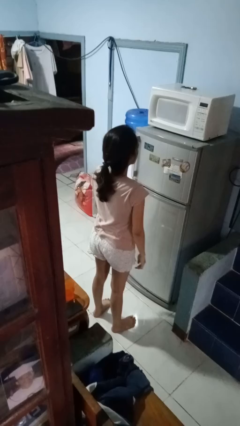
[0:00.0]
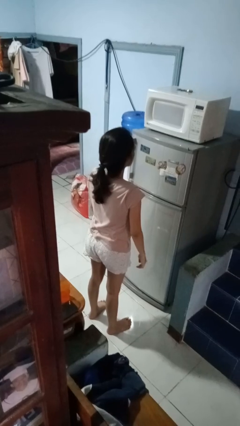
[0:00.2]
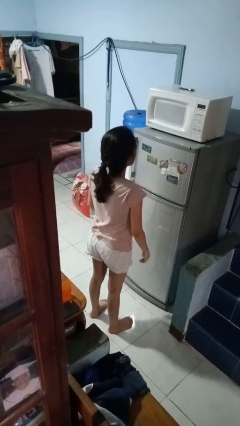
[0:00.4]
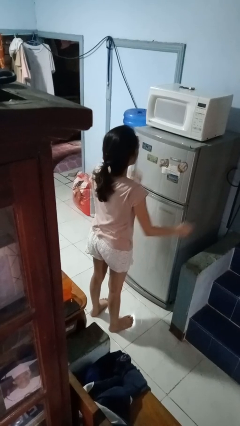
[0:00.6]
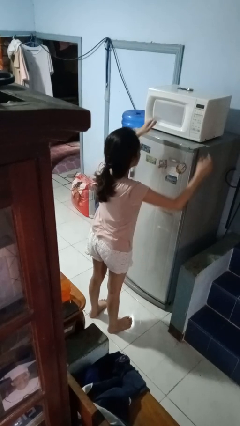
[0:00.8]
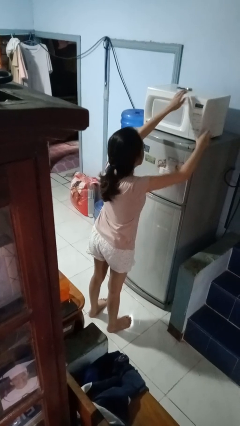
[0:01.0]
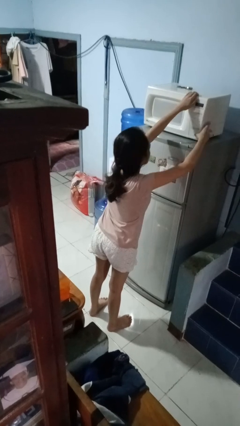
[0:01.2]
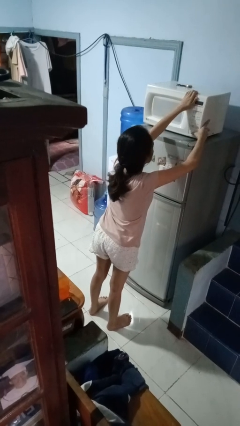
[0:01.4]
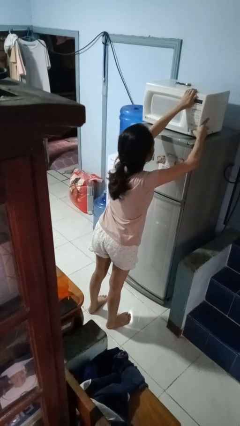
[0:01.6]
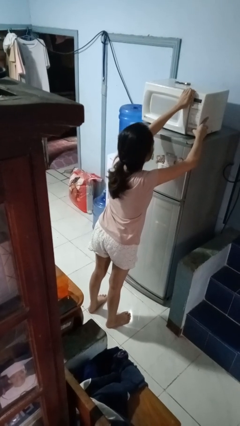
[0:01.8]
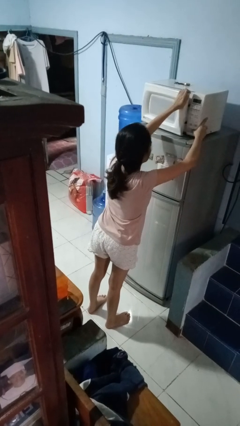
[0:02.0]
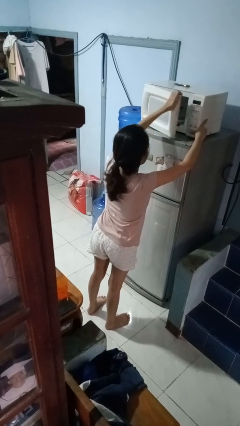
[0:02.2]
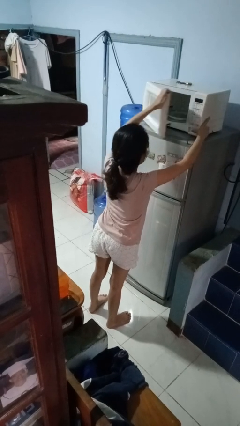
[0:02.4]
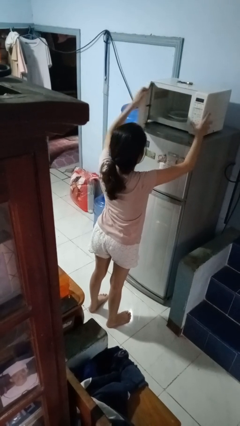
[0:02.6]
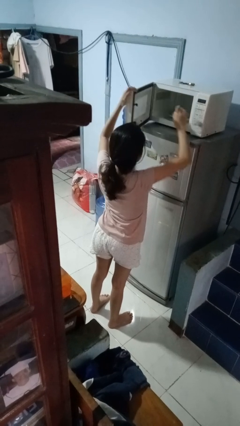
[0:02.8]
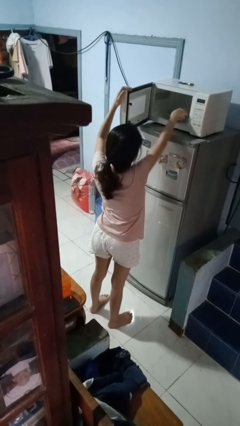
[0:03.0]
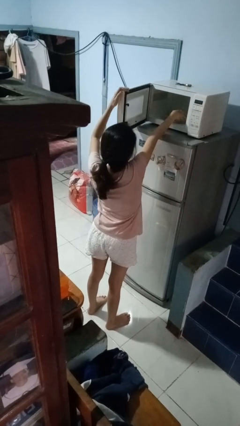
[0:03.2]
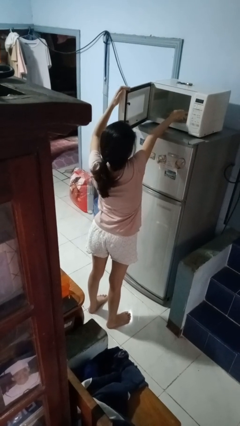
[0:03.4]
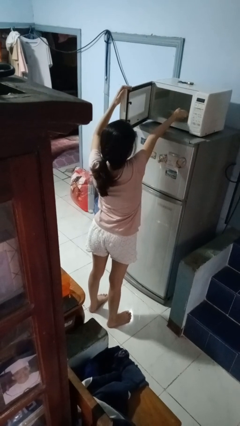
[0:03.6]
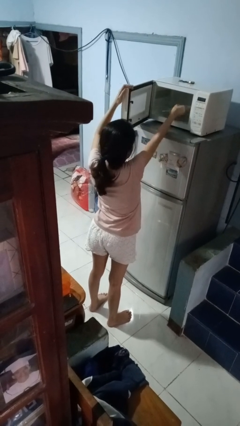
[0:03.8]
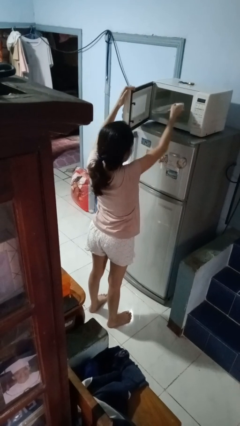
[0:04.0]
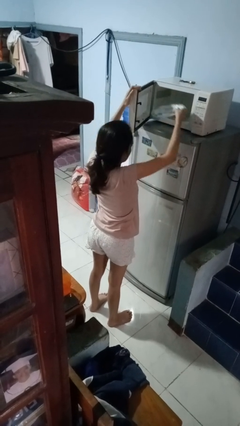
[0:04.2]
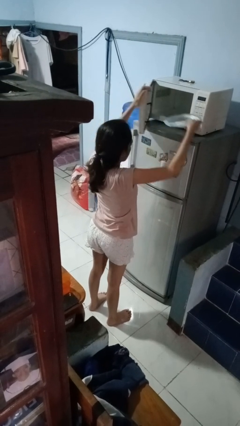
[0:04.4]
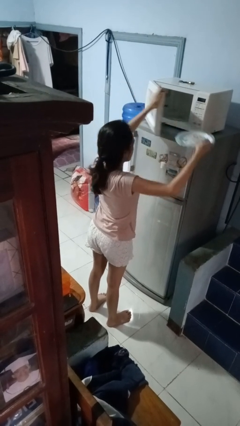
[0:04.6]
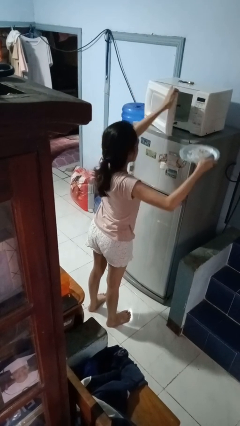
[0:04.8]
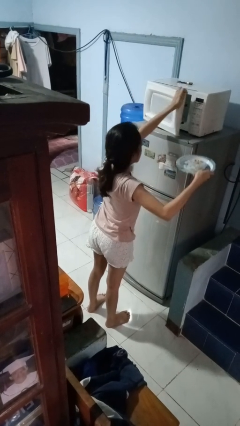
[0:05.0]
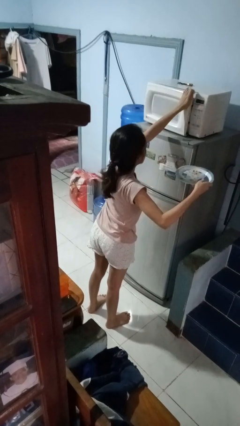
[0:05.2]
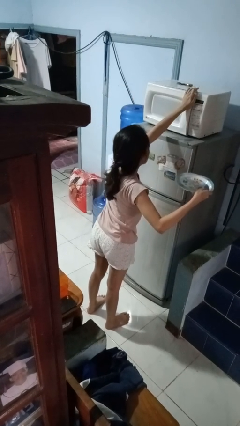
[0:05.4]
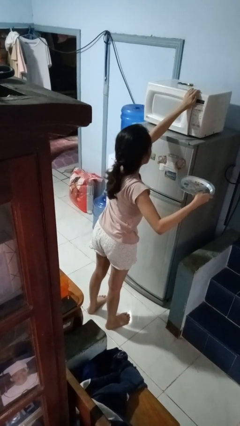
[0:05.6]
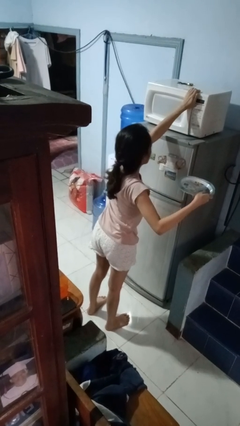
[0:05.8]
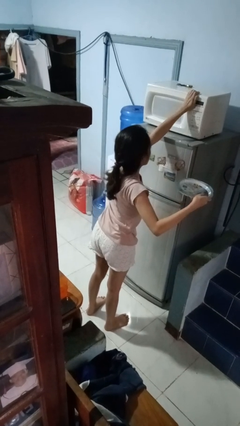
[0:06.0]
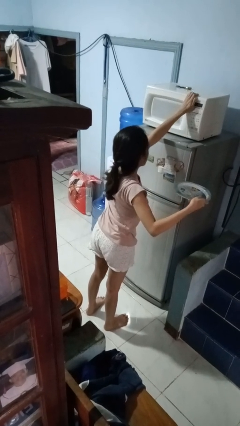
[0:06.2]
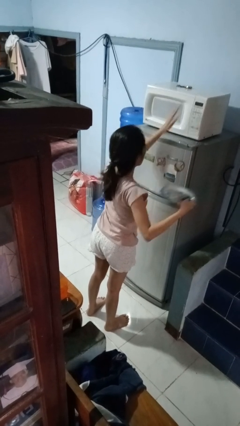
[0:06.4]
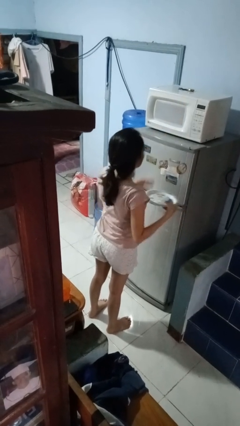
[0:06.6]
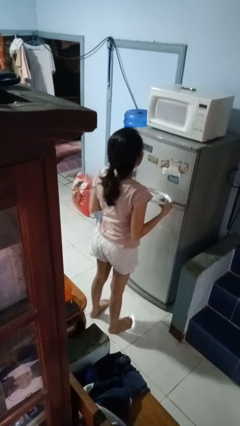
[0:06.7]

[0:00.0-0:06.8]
person takes object from microwave

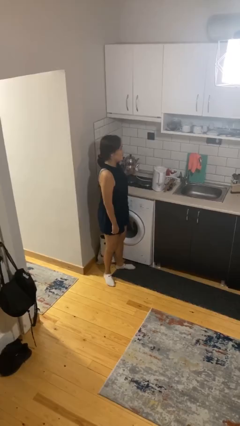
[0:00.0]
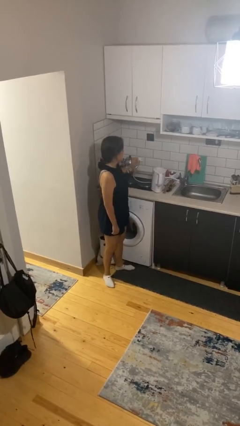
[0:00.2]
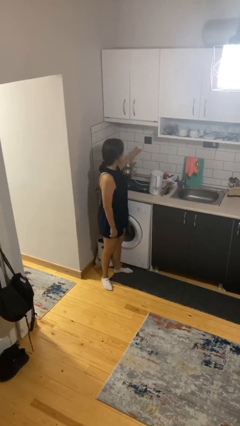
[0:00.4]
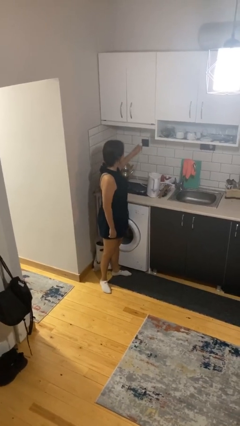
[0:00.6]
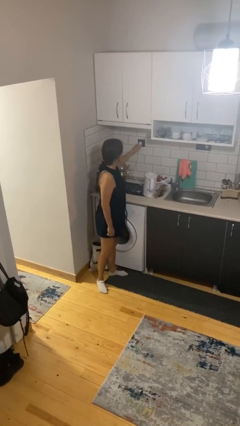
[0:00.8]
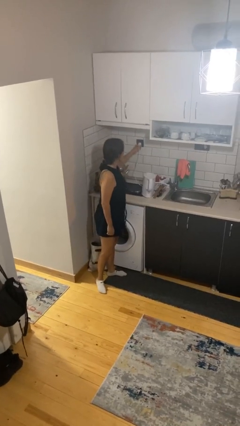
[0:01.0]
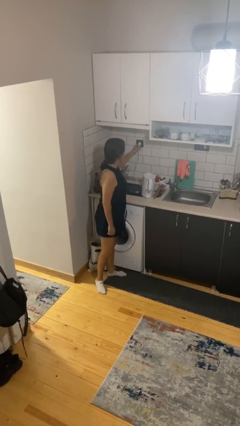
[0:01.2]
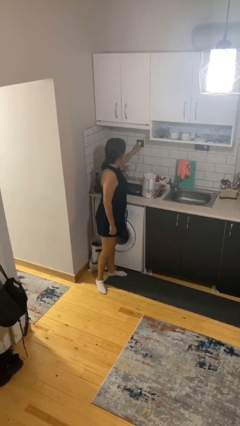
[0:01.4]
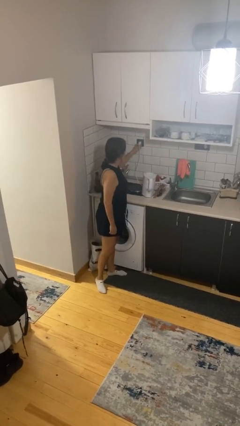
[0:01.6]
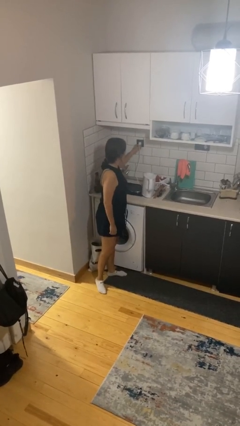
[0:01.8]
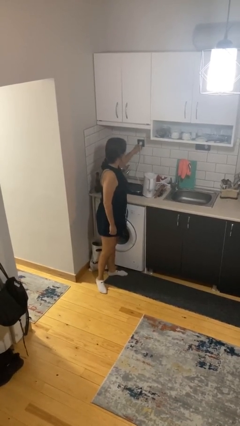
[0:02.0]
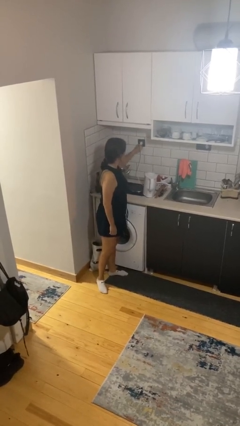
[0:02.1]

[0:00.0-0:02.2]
person plugs into electrical socket

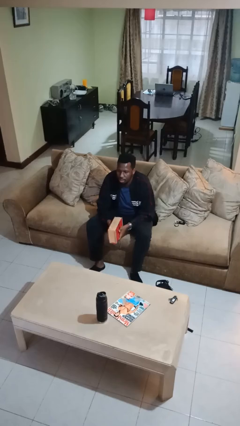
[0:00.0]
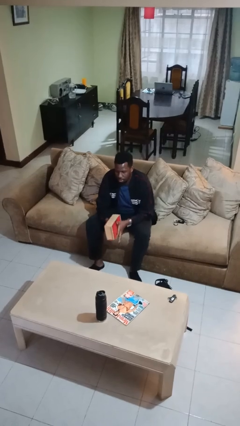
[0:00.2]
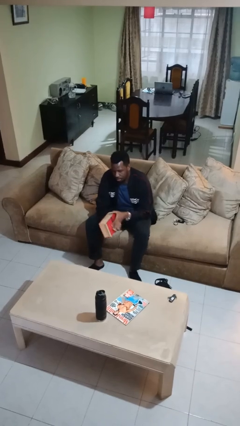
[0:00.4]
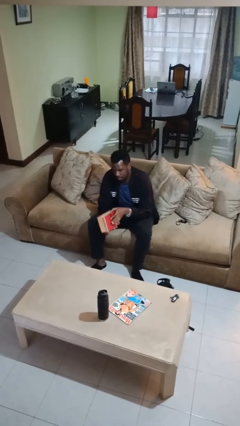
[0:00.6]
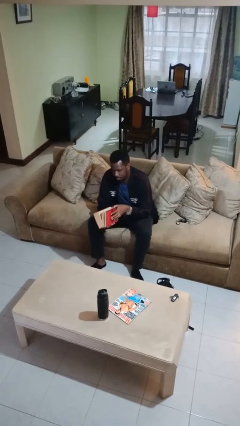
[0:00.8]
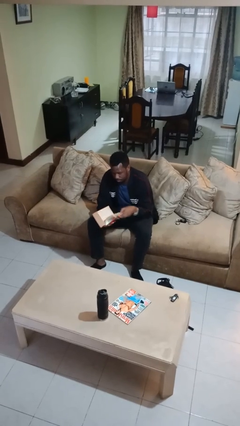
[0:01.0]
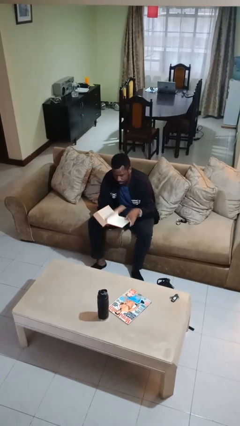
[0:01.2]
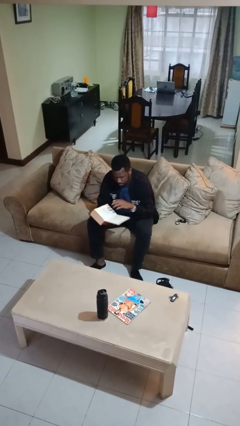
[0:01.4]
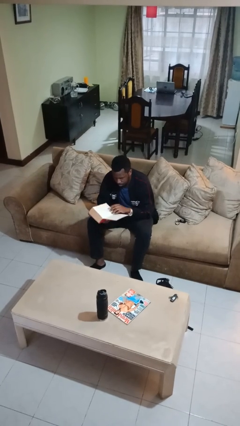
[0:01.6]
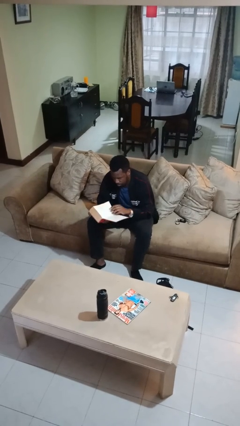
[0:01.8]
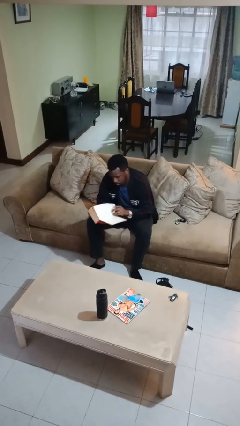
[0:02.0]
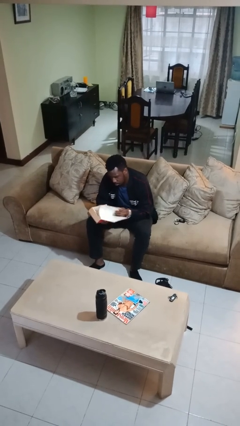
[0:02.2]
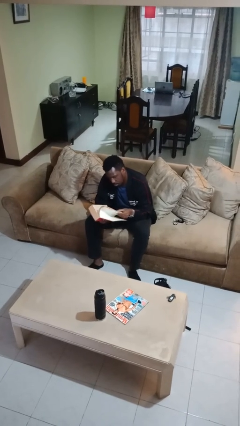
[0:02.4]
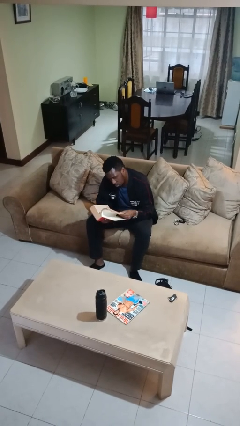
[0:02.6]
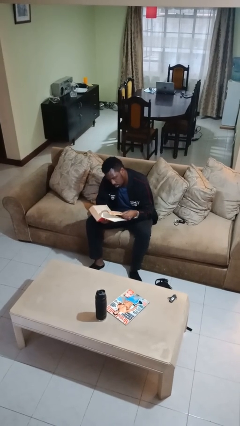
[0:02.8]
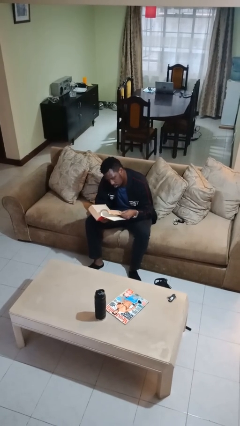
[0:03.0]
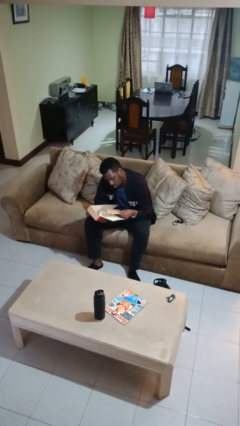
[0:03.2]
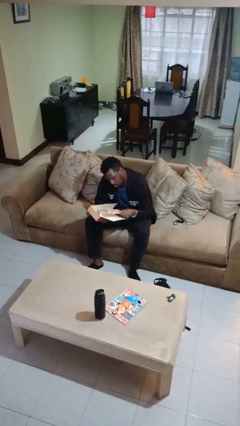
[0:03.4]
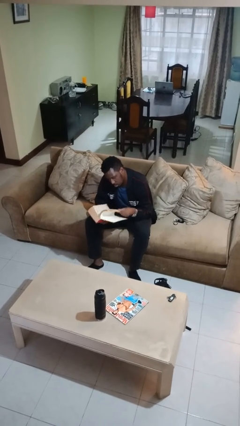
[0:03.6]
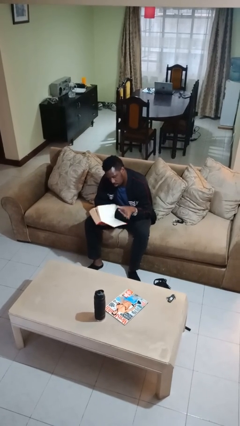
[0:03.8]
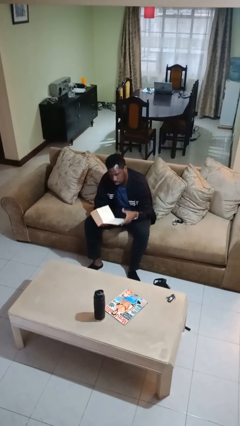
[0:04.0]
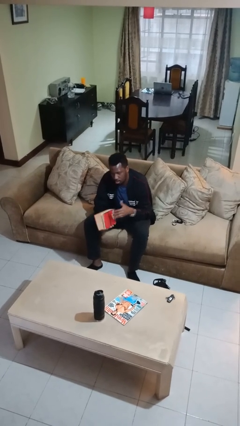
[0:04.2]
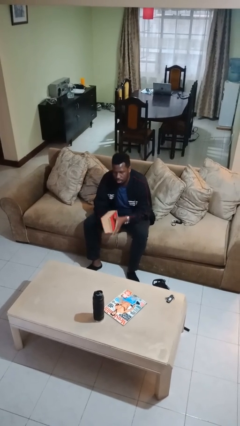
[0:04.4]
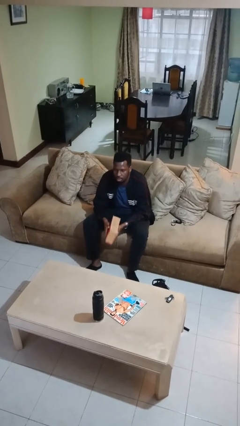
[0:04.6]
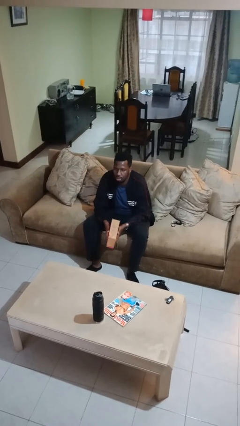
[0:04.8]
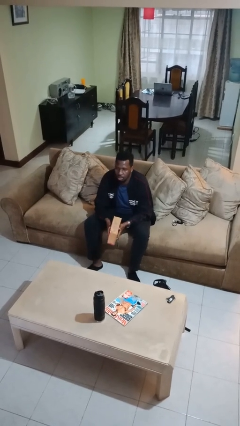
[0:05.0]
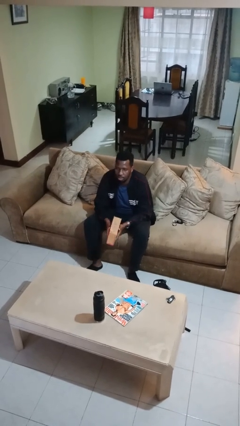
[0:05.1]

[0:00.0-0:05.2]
person reads book

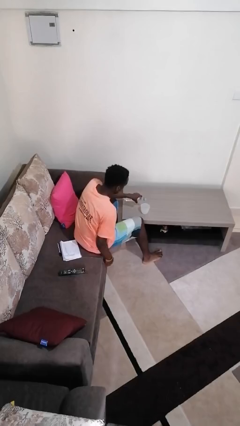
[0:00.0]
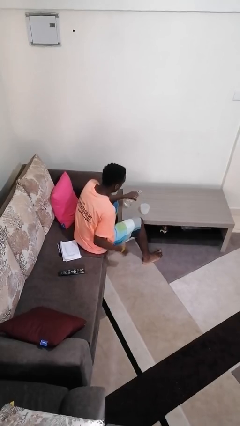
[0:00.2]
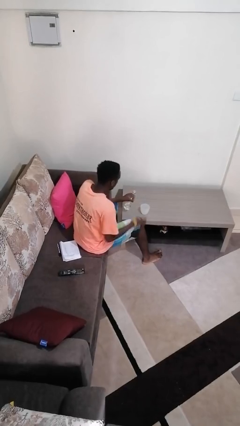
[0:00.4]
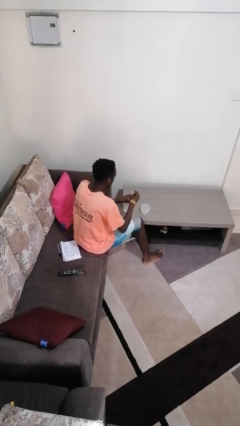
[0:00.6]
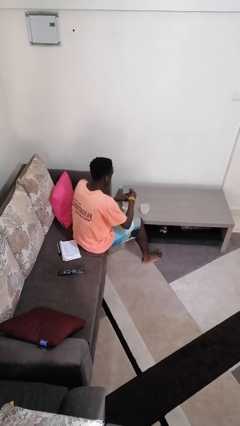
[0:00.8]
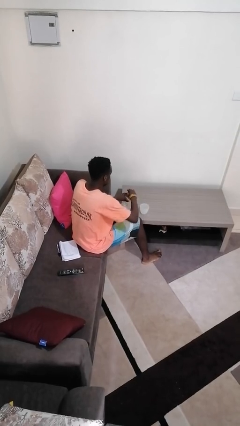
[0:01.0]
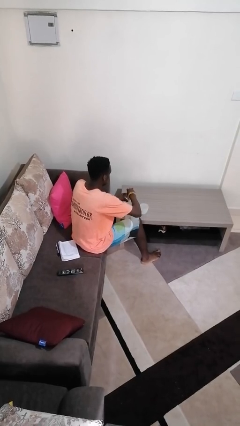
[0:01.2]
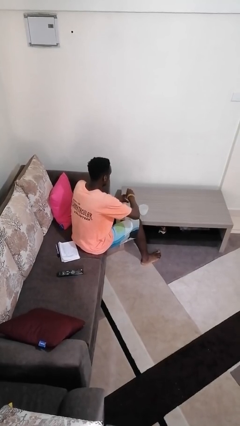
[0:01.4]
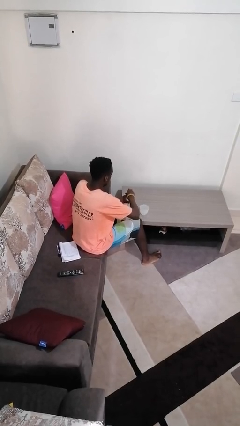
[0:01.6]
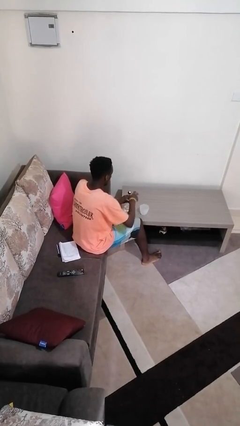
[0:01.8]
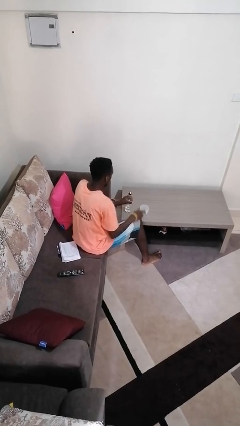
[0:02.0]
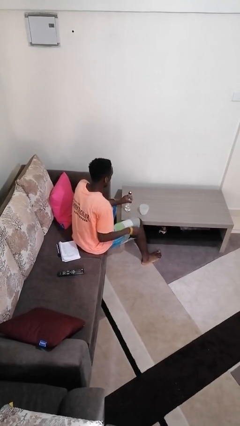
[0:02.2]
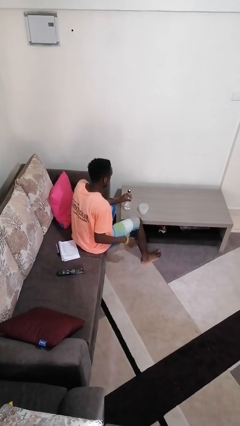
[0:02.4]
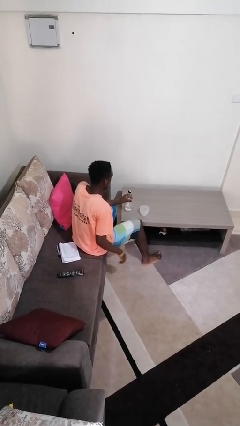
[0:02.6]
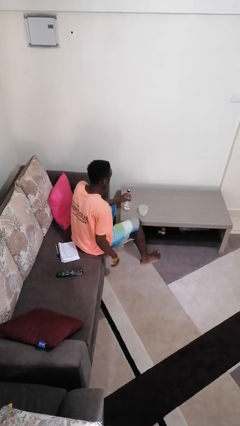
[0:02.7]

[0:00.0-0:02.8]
person screws lid to bottle

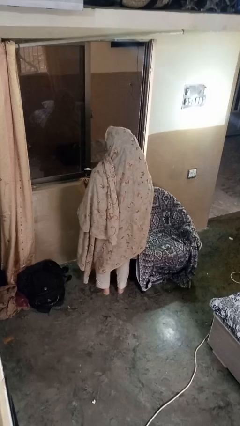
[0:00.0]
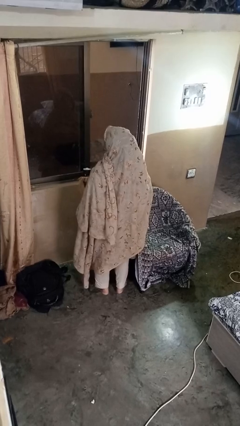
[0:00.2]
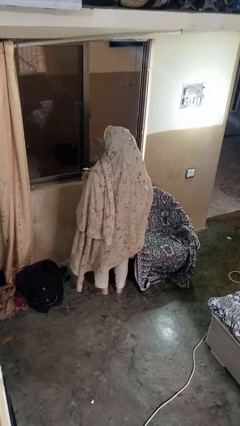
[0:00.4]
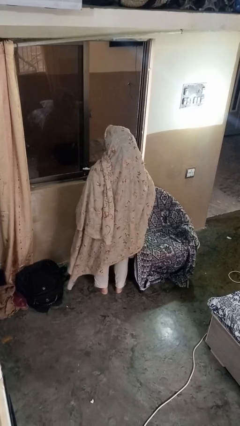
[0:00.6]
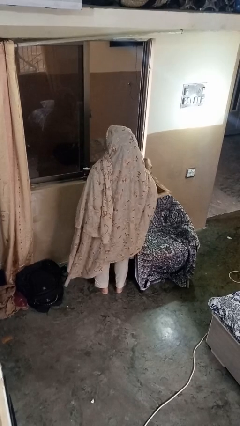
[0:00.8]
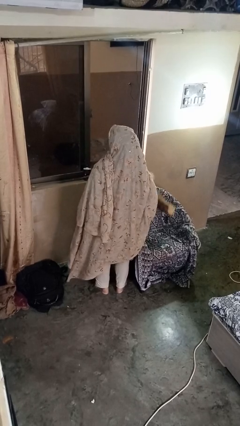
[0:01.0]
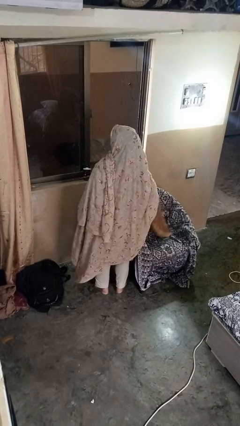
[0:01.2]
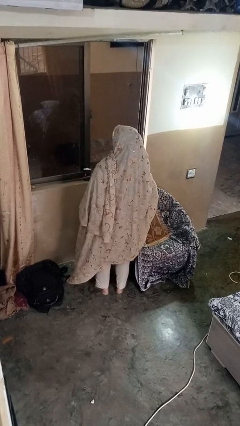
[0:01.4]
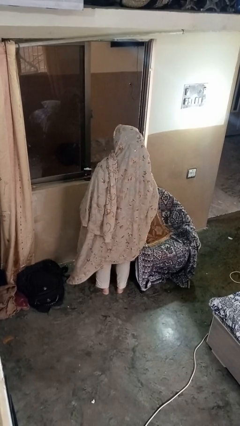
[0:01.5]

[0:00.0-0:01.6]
person puts down object on couch
